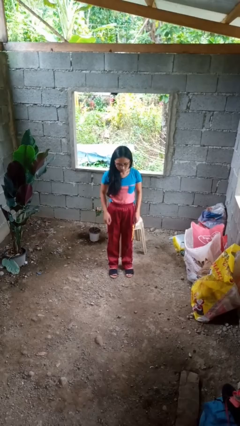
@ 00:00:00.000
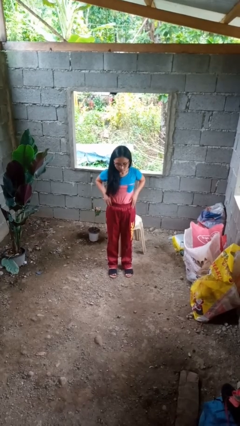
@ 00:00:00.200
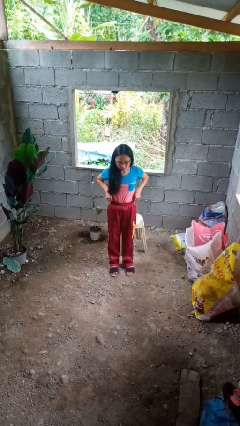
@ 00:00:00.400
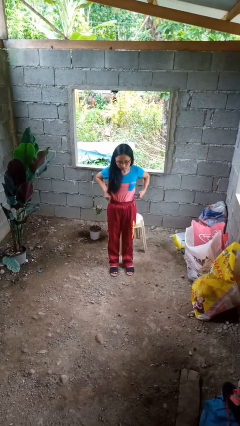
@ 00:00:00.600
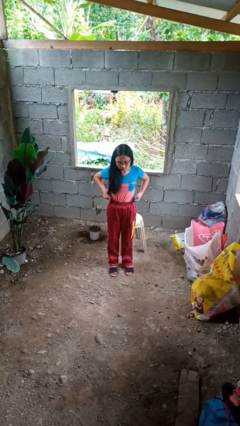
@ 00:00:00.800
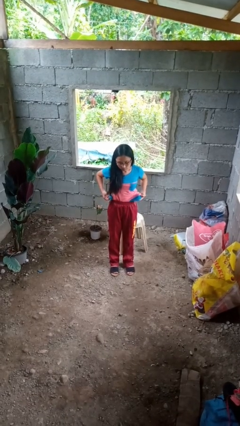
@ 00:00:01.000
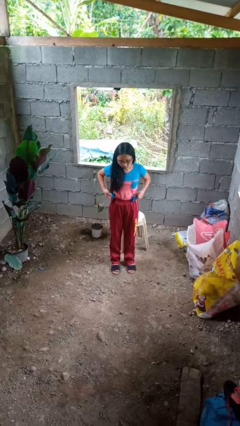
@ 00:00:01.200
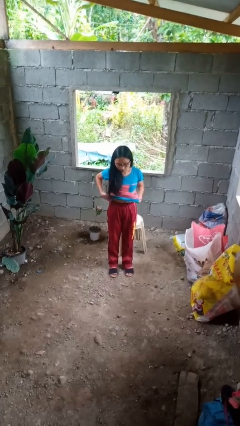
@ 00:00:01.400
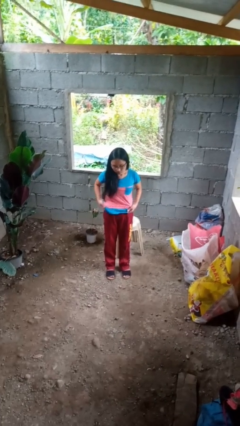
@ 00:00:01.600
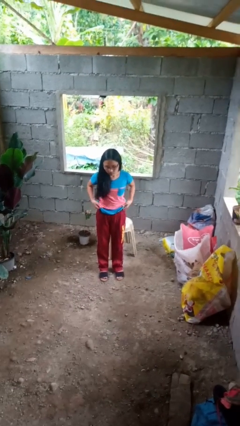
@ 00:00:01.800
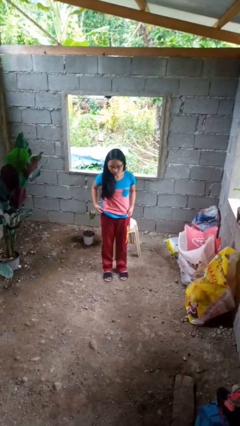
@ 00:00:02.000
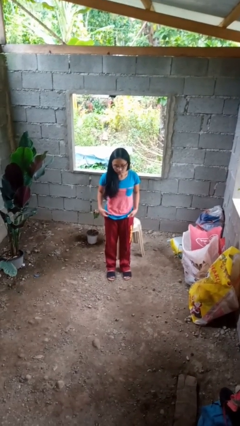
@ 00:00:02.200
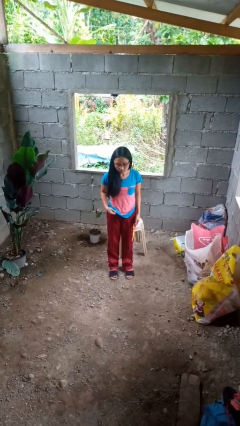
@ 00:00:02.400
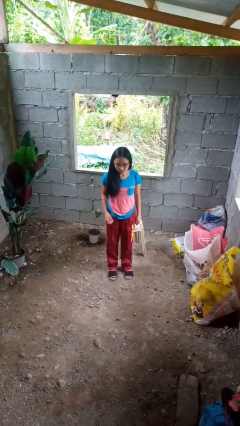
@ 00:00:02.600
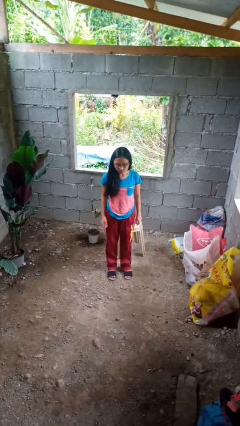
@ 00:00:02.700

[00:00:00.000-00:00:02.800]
person untucks shirt

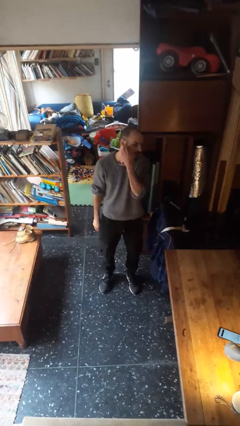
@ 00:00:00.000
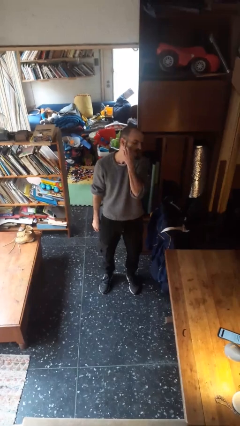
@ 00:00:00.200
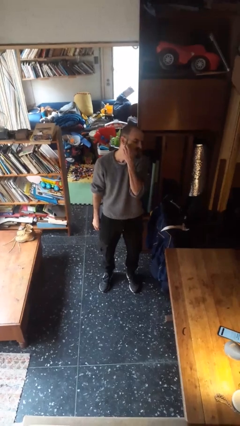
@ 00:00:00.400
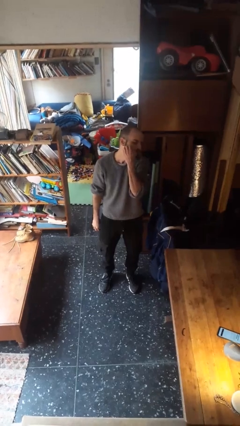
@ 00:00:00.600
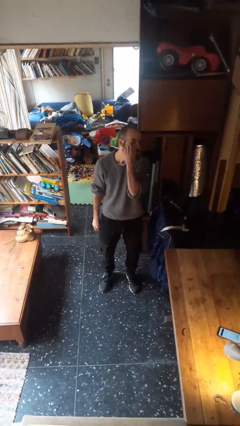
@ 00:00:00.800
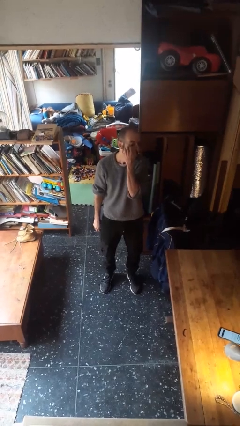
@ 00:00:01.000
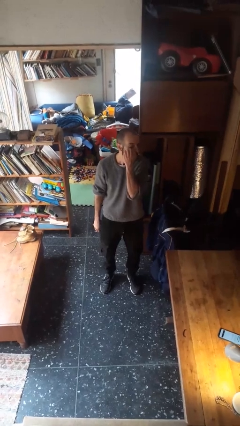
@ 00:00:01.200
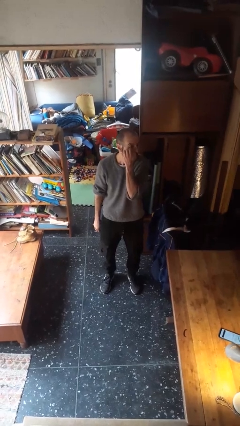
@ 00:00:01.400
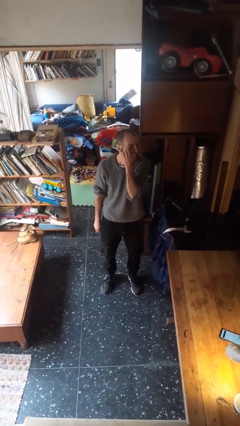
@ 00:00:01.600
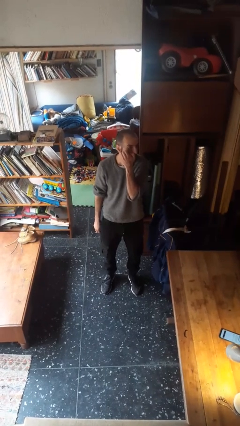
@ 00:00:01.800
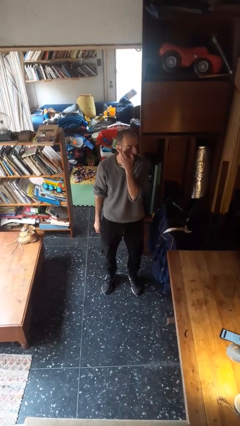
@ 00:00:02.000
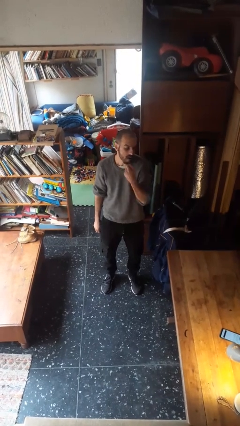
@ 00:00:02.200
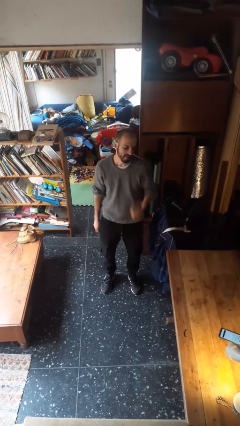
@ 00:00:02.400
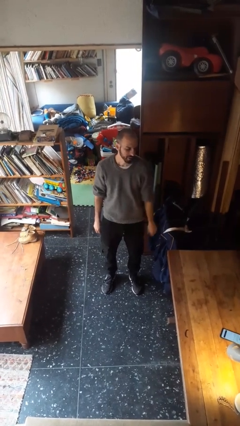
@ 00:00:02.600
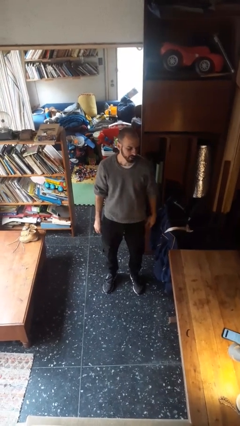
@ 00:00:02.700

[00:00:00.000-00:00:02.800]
person scratches face

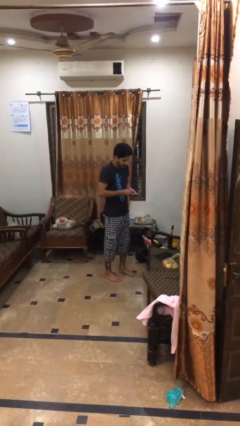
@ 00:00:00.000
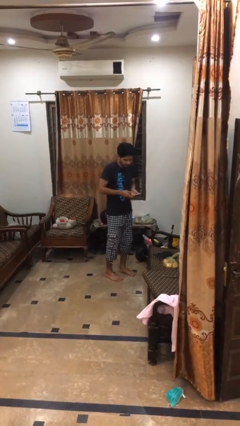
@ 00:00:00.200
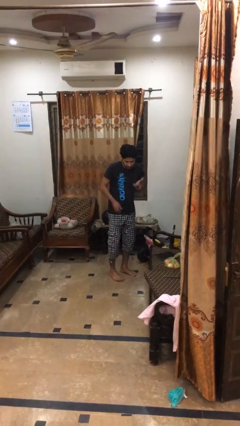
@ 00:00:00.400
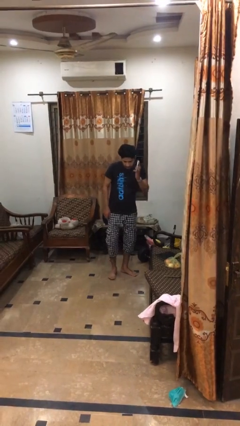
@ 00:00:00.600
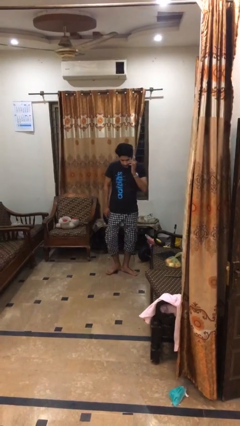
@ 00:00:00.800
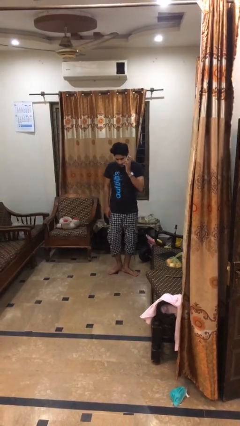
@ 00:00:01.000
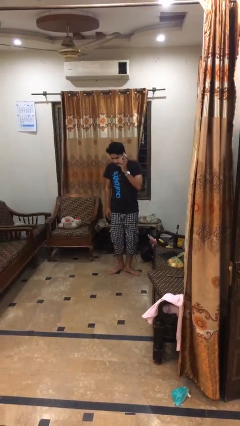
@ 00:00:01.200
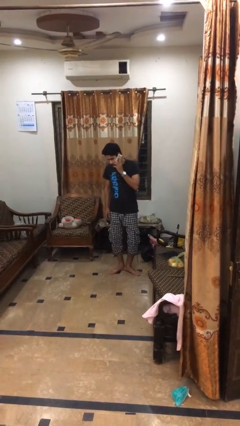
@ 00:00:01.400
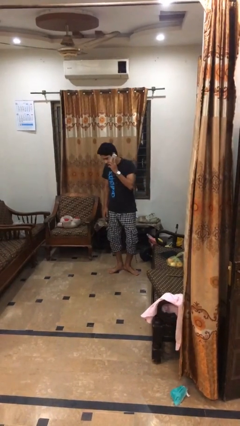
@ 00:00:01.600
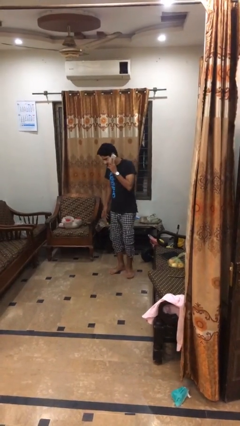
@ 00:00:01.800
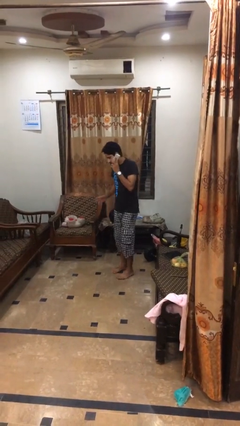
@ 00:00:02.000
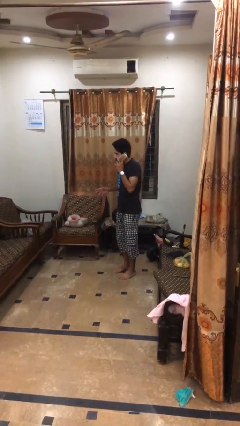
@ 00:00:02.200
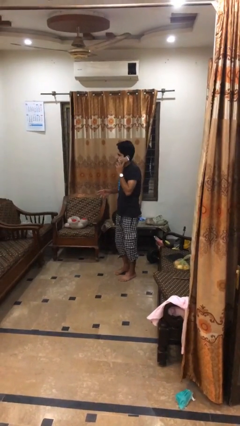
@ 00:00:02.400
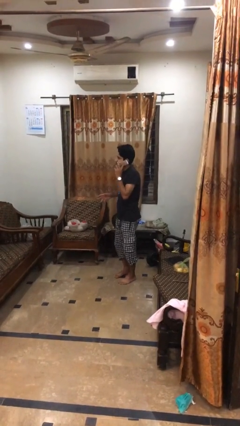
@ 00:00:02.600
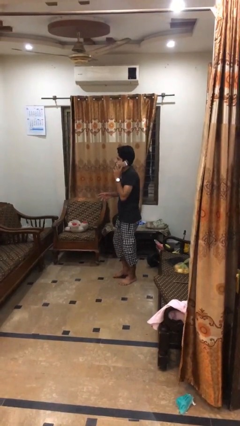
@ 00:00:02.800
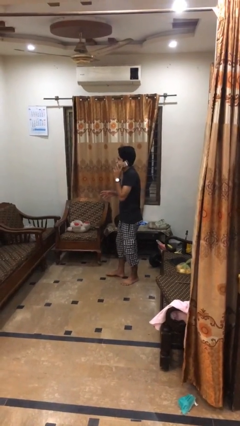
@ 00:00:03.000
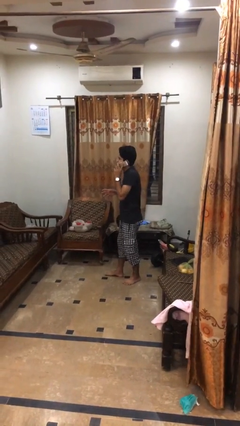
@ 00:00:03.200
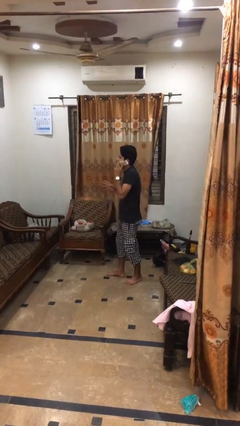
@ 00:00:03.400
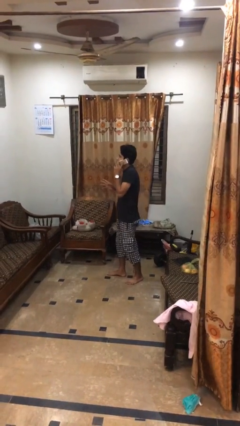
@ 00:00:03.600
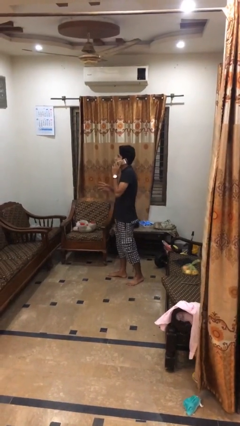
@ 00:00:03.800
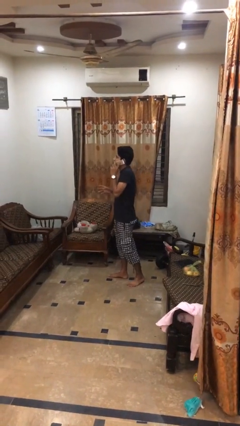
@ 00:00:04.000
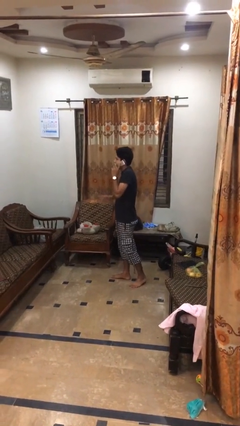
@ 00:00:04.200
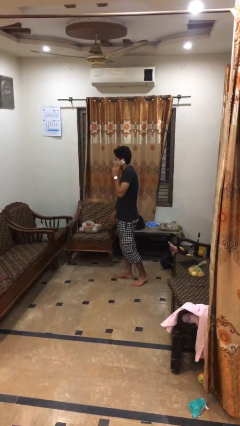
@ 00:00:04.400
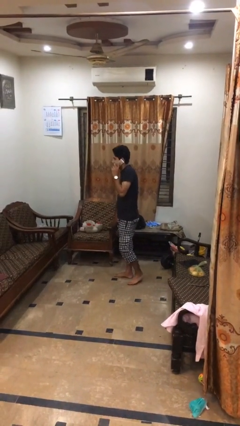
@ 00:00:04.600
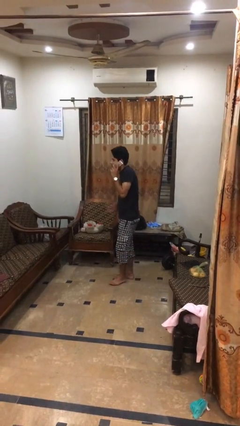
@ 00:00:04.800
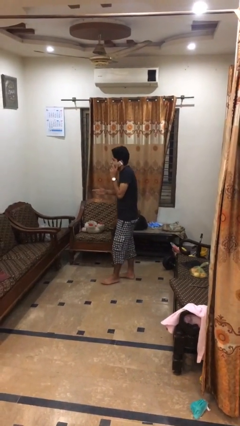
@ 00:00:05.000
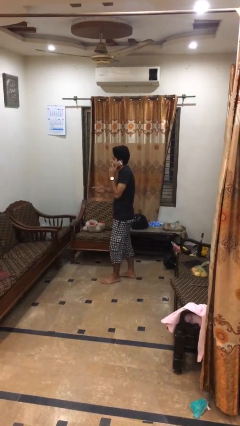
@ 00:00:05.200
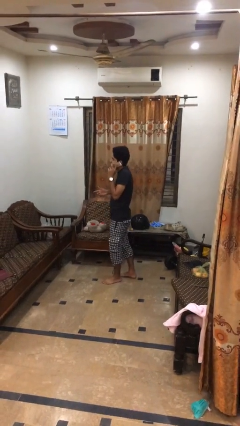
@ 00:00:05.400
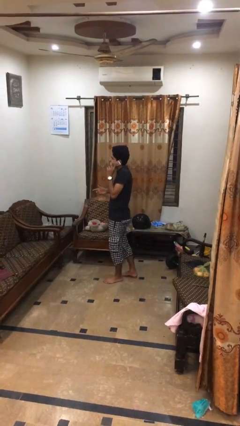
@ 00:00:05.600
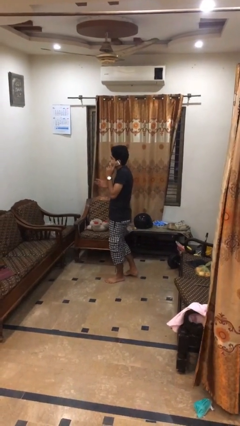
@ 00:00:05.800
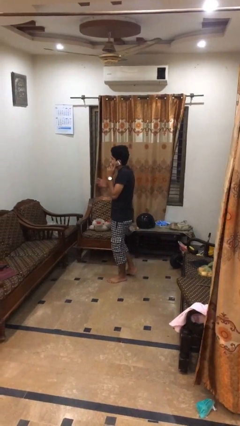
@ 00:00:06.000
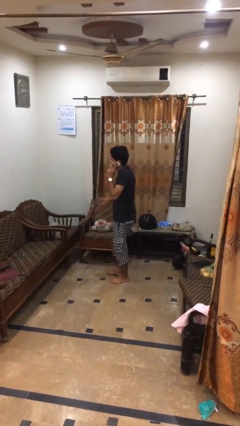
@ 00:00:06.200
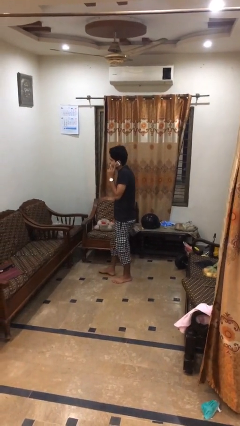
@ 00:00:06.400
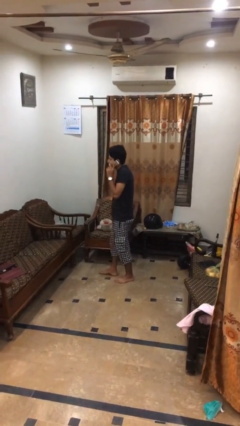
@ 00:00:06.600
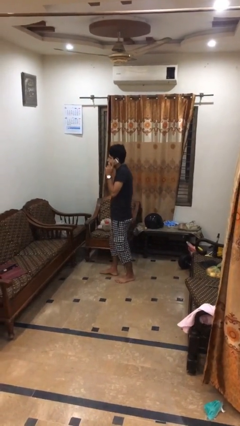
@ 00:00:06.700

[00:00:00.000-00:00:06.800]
person talks on phone

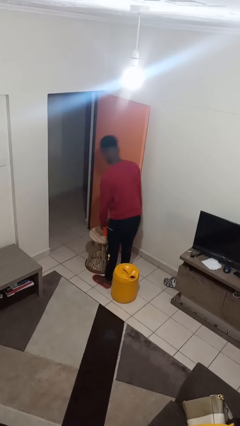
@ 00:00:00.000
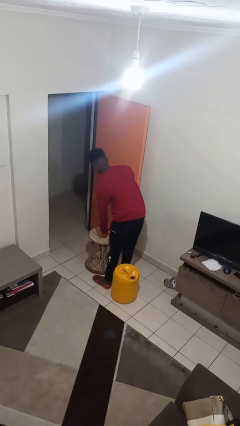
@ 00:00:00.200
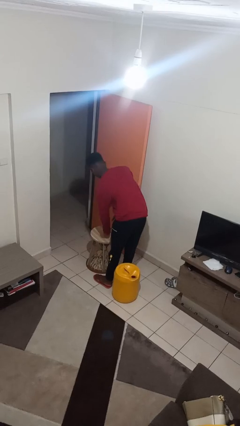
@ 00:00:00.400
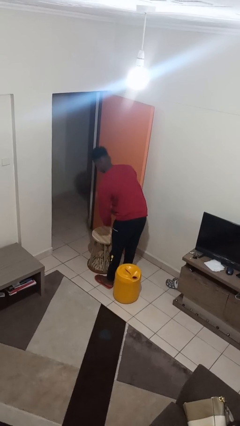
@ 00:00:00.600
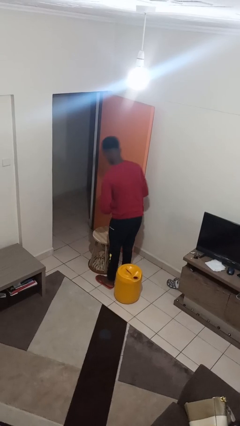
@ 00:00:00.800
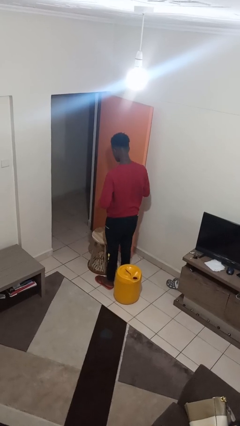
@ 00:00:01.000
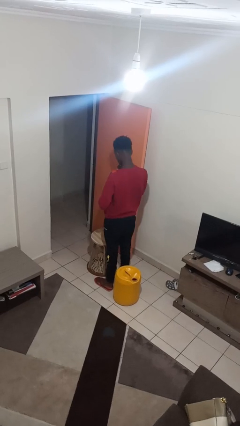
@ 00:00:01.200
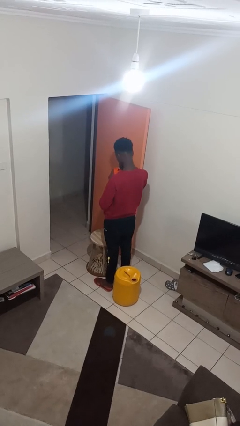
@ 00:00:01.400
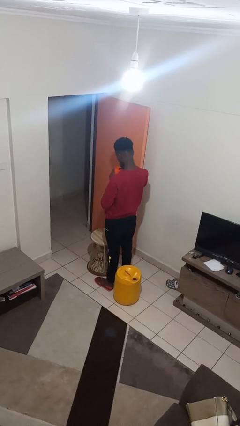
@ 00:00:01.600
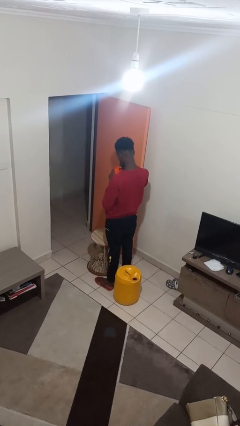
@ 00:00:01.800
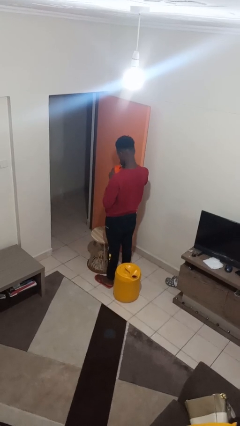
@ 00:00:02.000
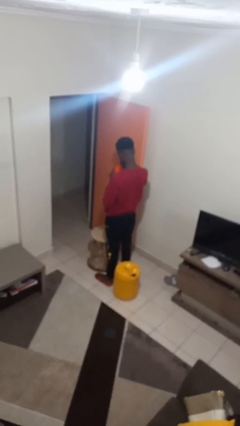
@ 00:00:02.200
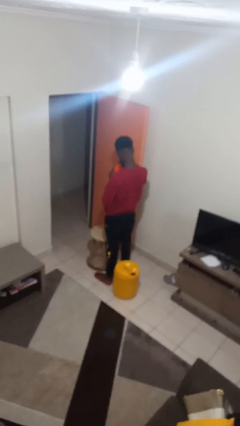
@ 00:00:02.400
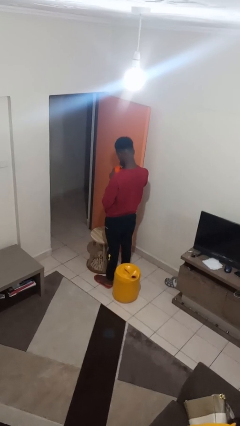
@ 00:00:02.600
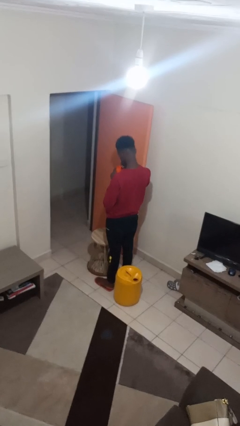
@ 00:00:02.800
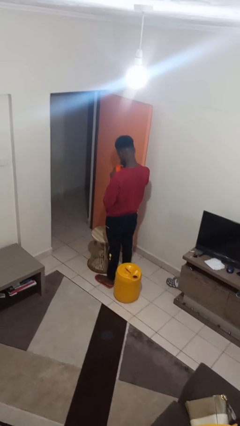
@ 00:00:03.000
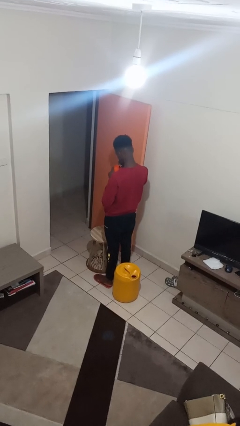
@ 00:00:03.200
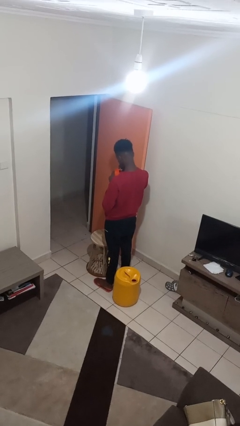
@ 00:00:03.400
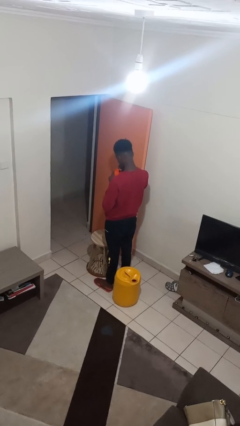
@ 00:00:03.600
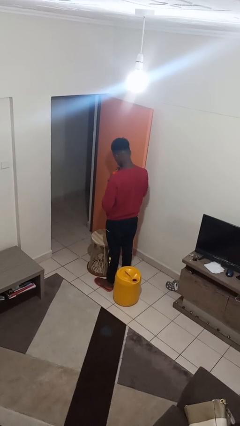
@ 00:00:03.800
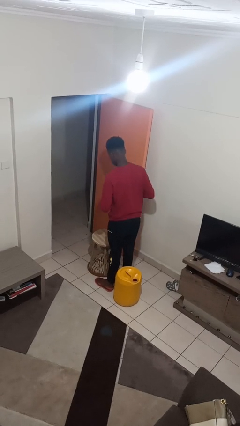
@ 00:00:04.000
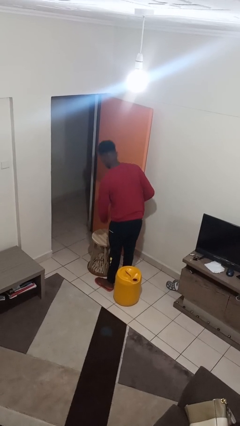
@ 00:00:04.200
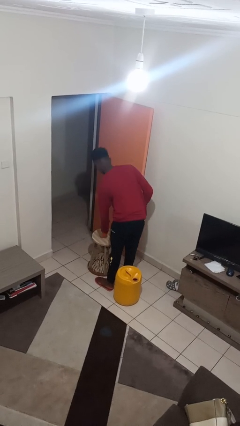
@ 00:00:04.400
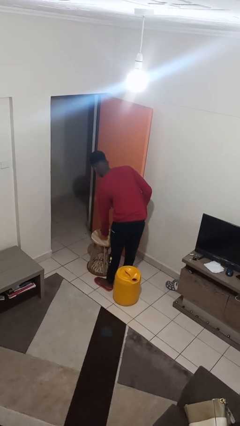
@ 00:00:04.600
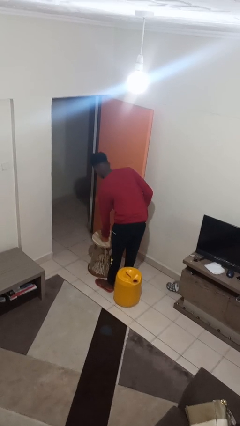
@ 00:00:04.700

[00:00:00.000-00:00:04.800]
person drinks from straw
